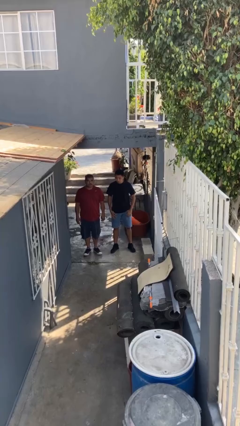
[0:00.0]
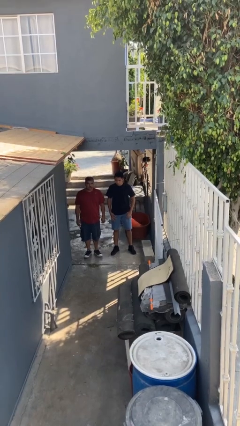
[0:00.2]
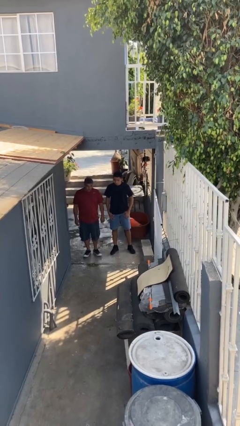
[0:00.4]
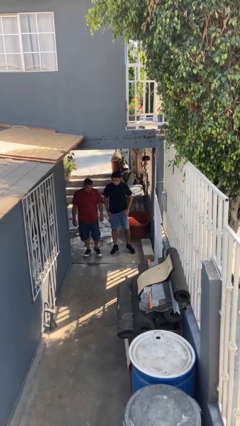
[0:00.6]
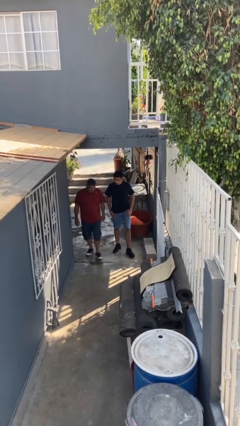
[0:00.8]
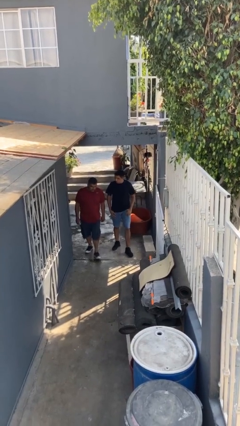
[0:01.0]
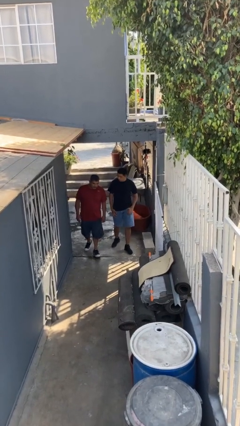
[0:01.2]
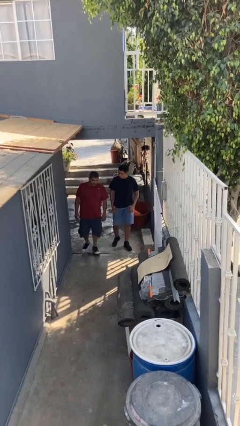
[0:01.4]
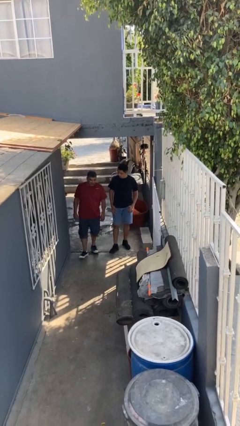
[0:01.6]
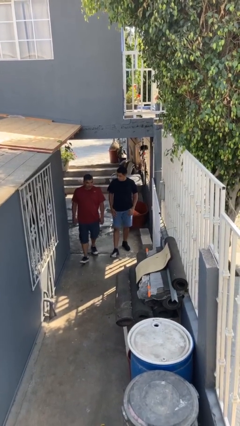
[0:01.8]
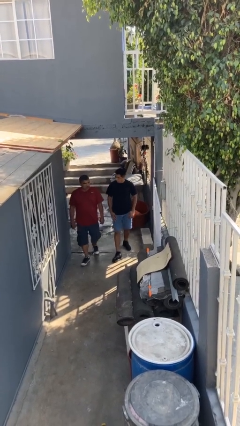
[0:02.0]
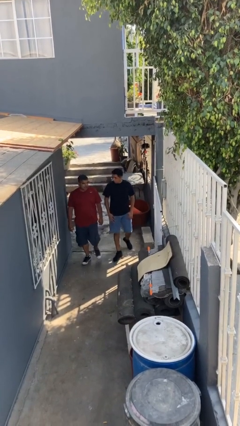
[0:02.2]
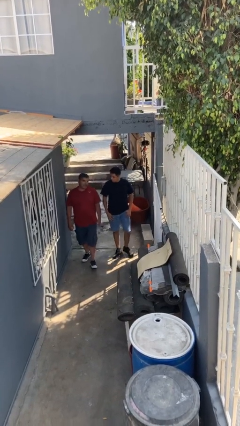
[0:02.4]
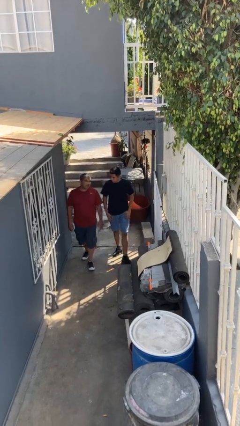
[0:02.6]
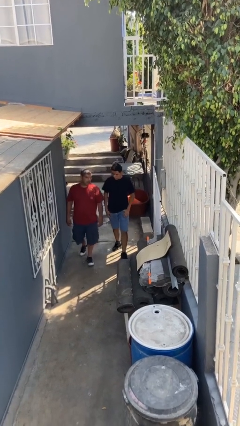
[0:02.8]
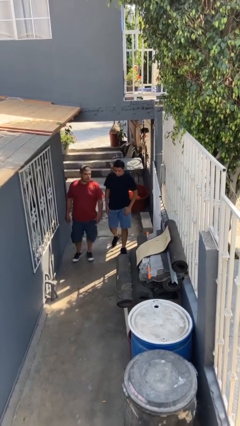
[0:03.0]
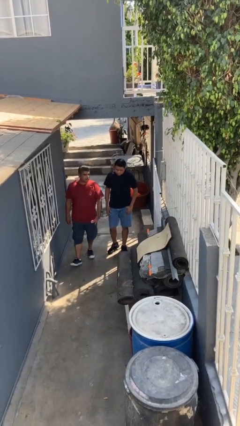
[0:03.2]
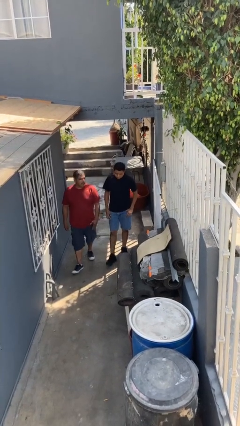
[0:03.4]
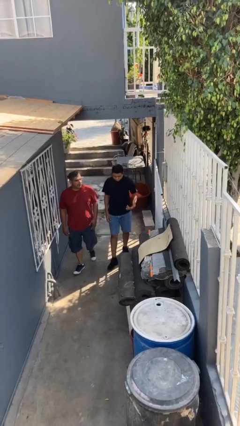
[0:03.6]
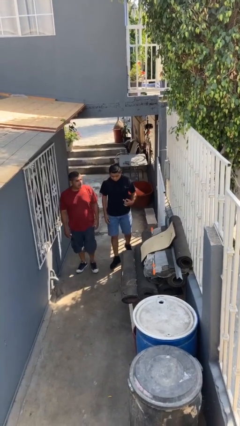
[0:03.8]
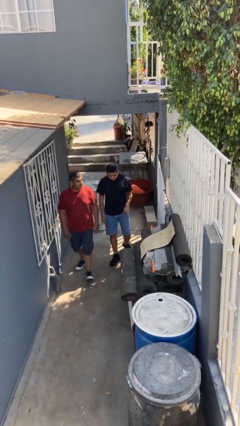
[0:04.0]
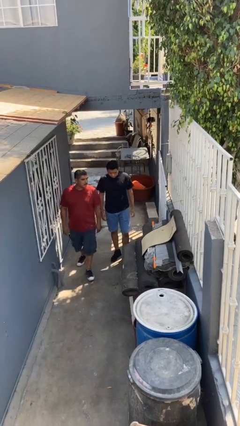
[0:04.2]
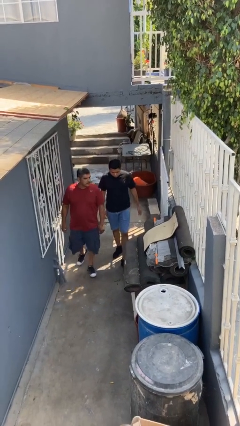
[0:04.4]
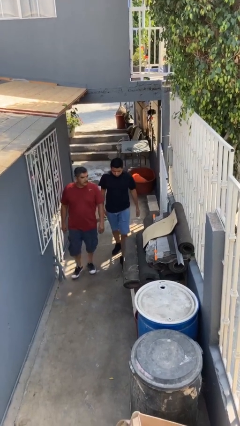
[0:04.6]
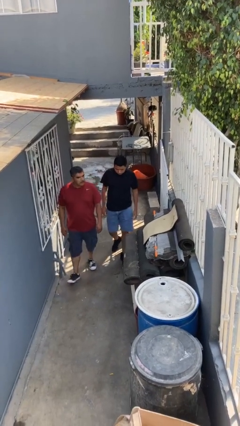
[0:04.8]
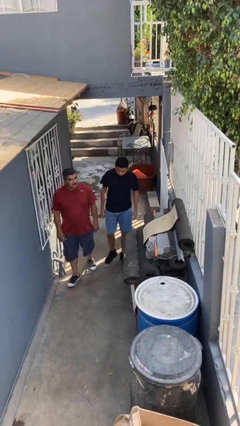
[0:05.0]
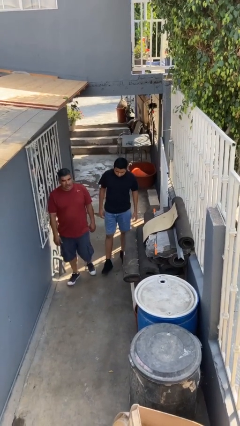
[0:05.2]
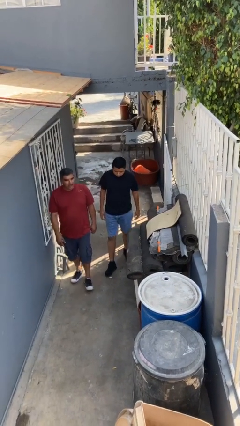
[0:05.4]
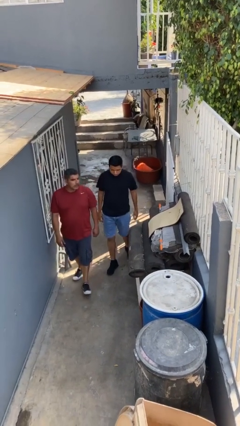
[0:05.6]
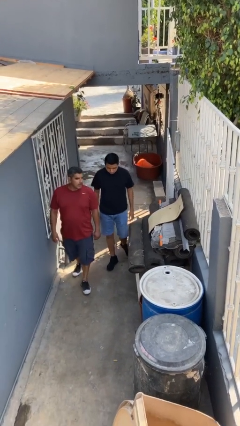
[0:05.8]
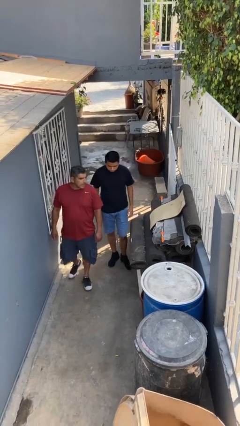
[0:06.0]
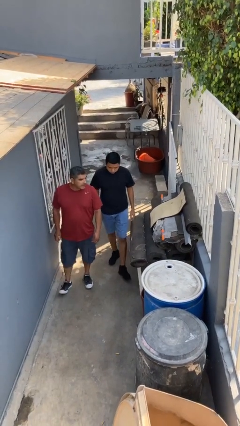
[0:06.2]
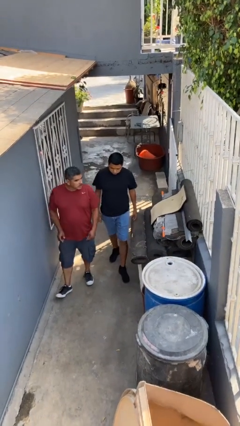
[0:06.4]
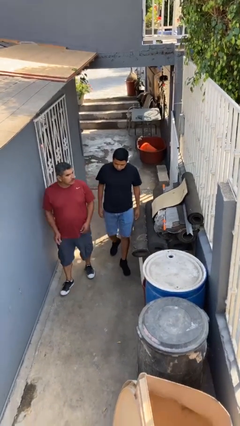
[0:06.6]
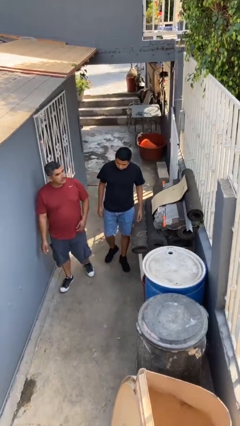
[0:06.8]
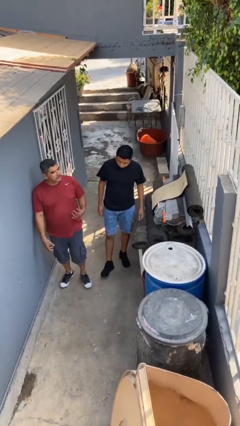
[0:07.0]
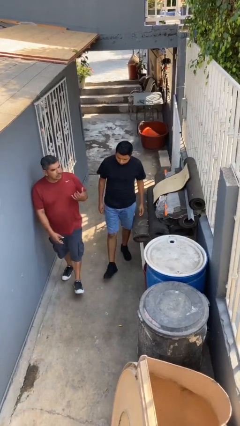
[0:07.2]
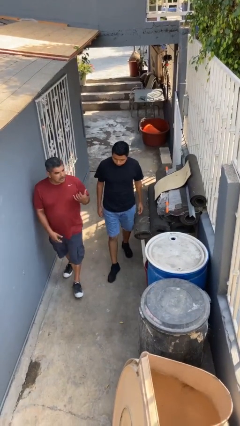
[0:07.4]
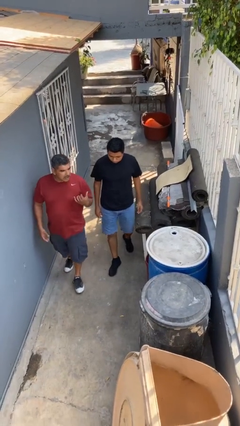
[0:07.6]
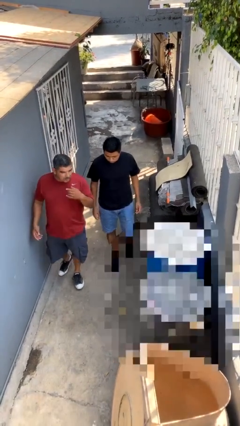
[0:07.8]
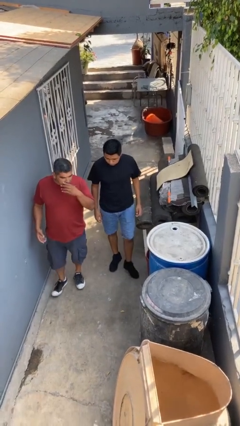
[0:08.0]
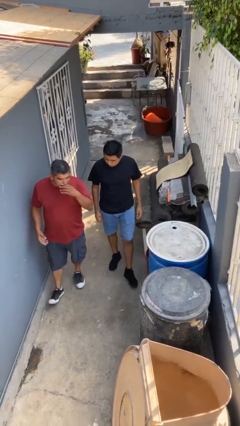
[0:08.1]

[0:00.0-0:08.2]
person talks to person

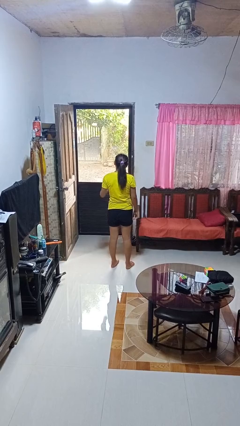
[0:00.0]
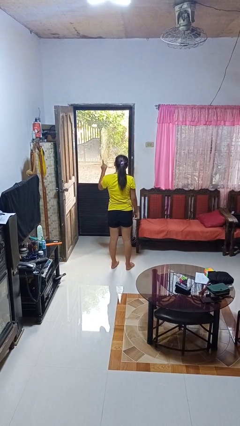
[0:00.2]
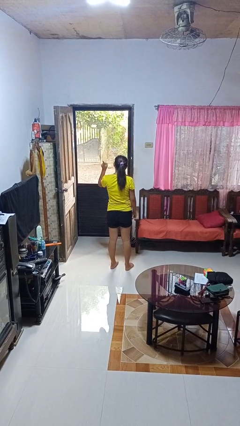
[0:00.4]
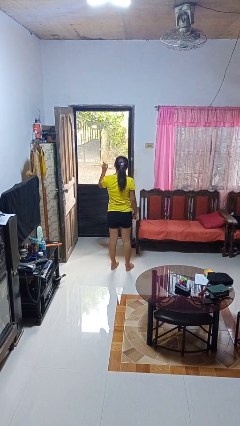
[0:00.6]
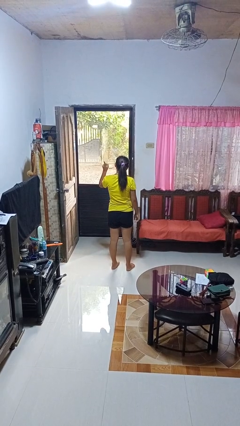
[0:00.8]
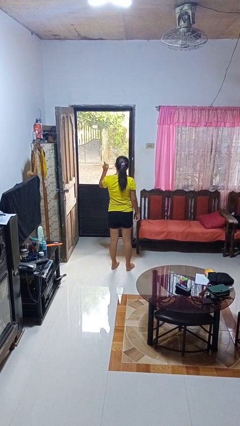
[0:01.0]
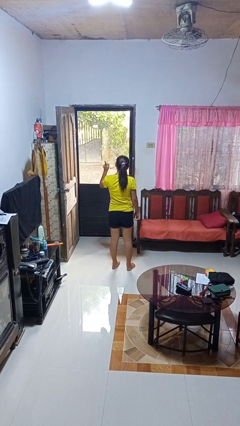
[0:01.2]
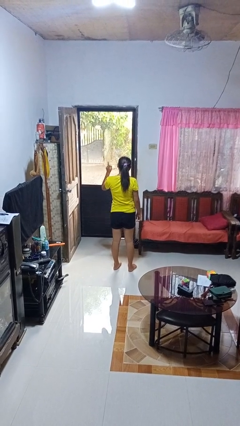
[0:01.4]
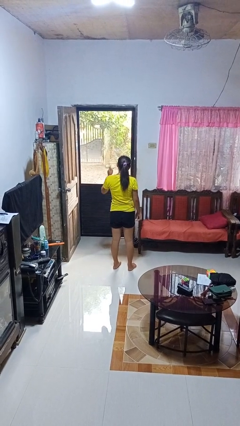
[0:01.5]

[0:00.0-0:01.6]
person gestures number one

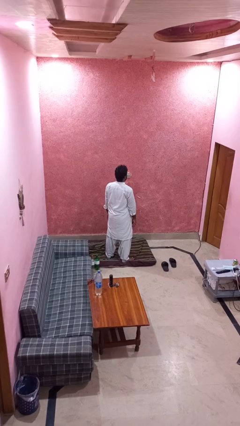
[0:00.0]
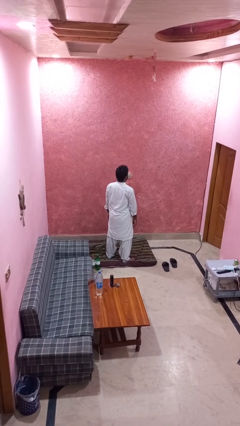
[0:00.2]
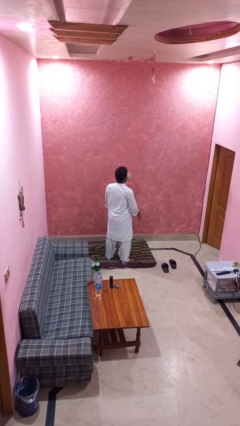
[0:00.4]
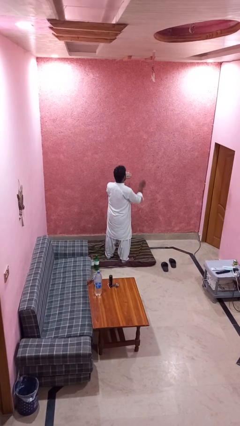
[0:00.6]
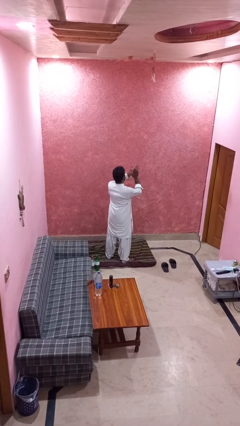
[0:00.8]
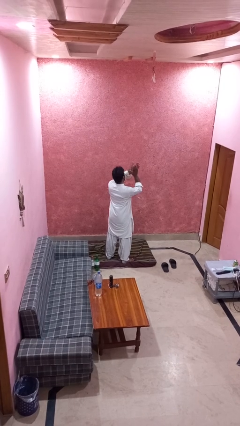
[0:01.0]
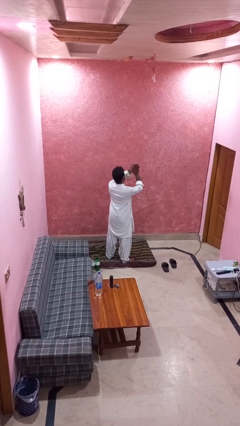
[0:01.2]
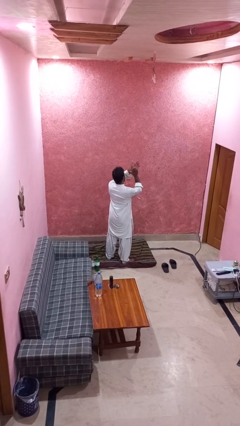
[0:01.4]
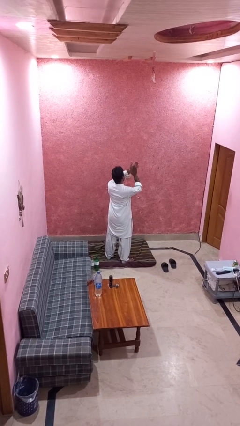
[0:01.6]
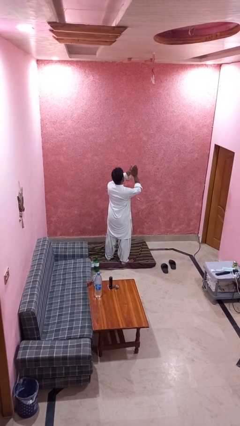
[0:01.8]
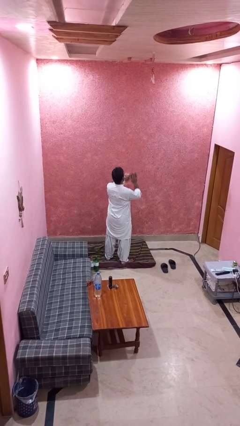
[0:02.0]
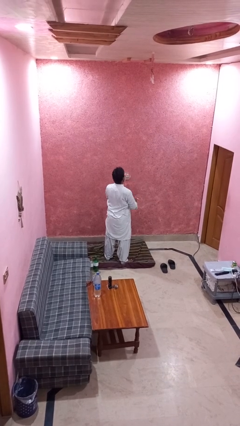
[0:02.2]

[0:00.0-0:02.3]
person claps hands

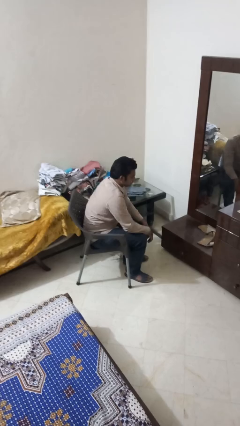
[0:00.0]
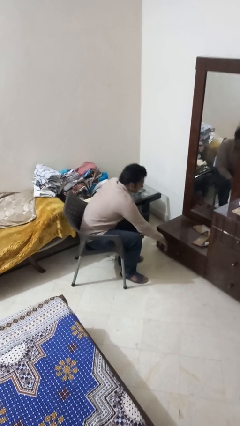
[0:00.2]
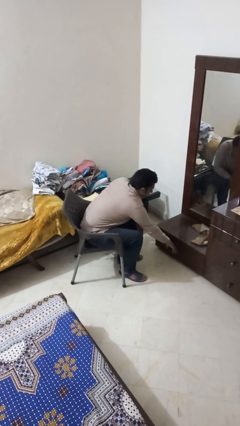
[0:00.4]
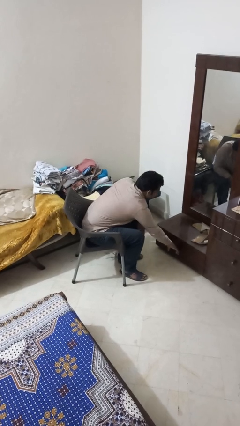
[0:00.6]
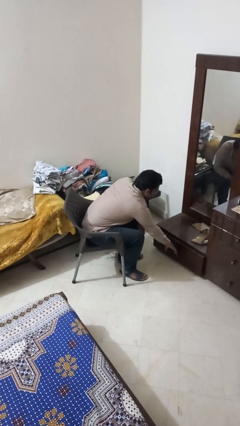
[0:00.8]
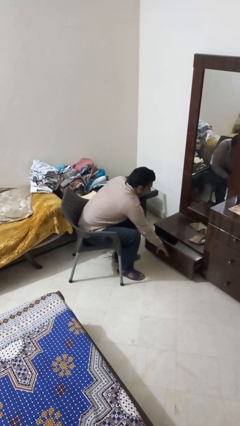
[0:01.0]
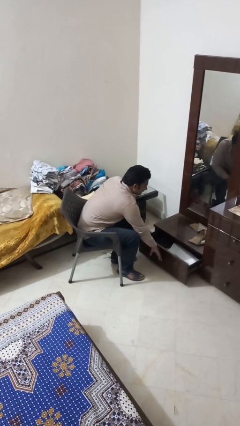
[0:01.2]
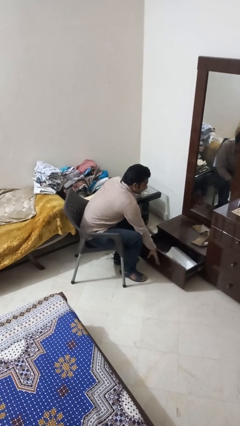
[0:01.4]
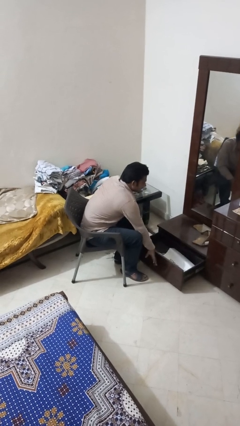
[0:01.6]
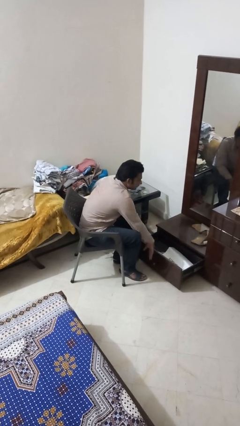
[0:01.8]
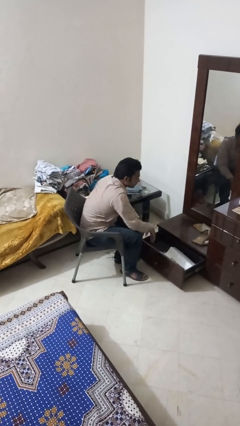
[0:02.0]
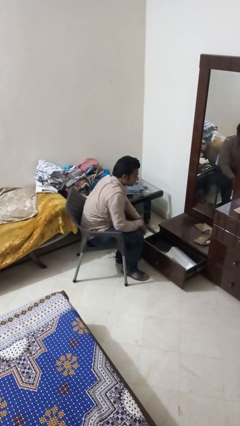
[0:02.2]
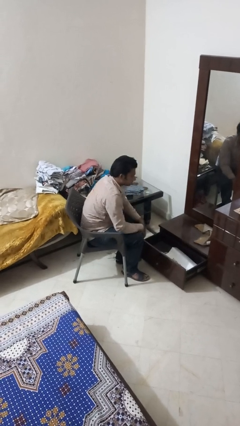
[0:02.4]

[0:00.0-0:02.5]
person opens dresser drawer

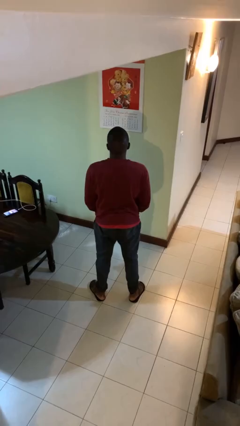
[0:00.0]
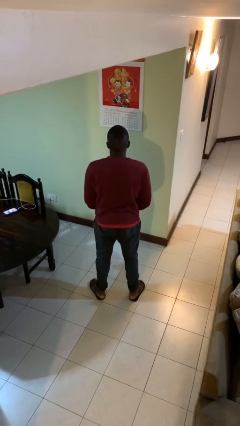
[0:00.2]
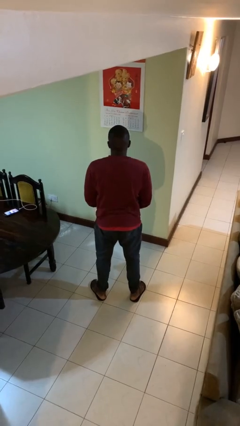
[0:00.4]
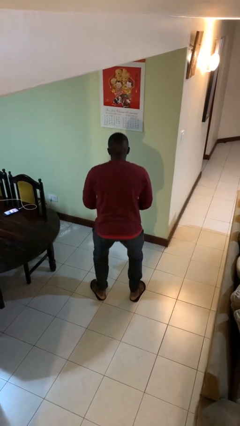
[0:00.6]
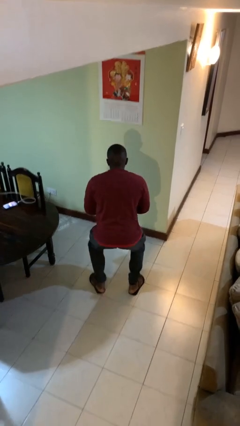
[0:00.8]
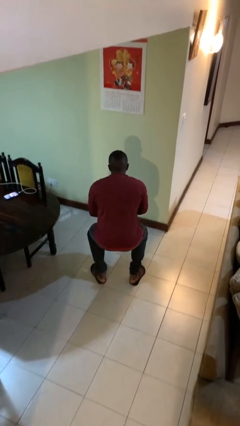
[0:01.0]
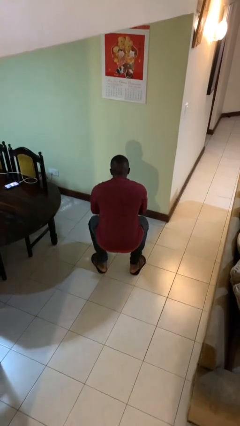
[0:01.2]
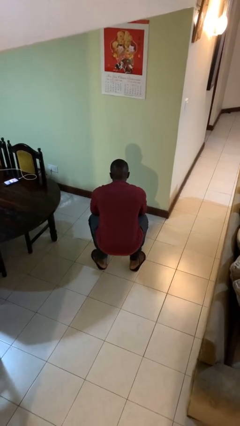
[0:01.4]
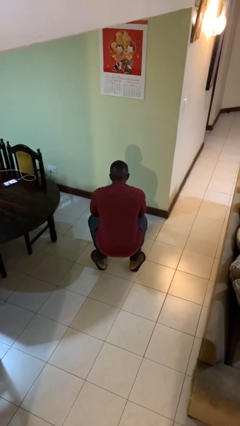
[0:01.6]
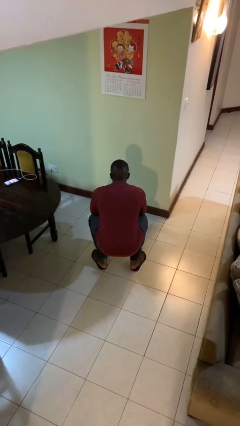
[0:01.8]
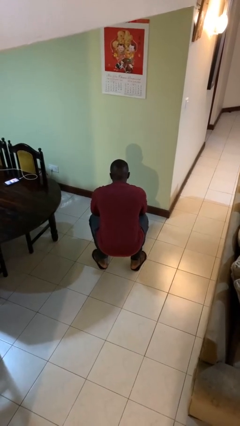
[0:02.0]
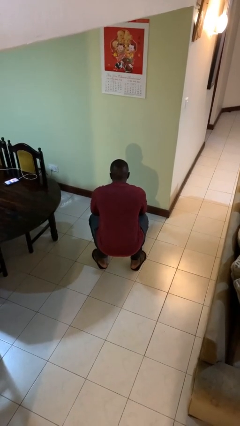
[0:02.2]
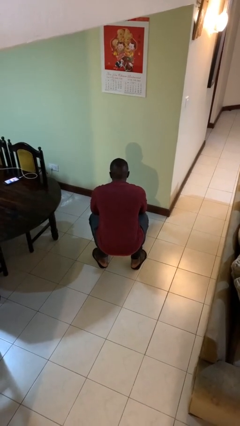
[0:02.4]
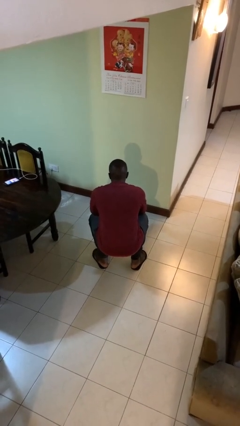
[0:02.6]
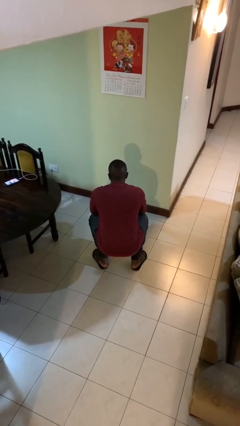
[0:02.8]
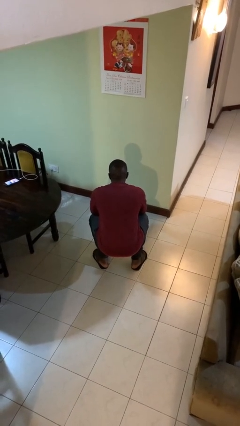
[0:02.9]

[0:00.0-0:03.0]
person squats

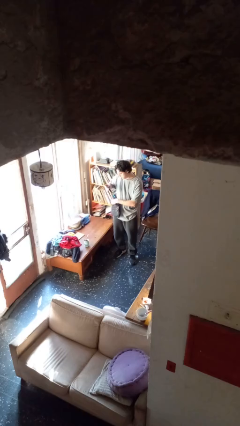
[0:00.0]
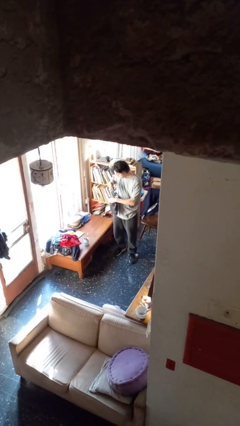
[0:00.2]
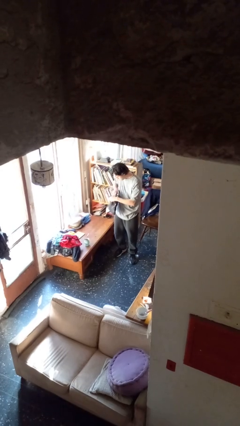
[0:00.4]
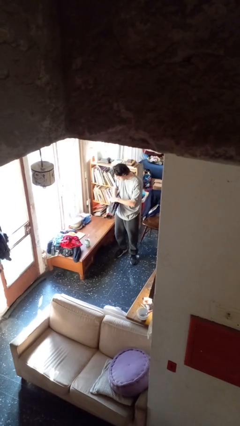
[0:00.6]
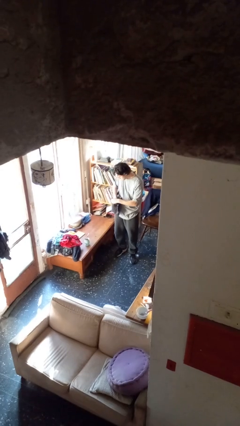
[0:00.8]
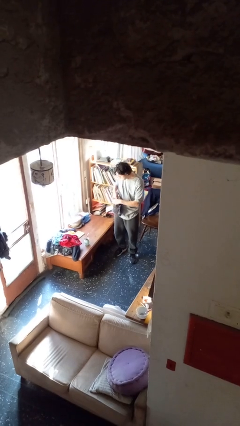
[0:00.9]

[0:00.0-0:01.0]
person puts object into purse
